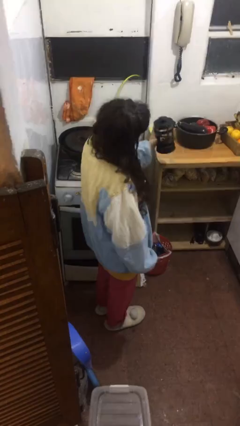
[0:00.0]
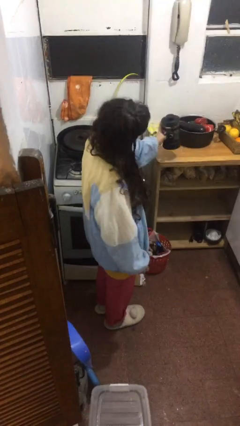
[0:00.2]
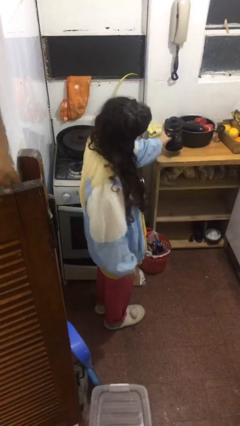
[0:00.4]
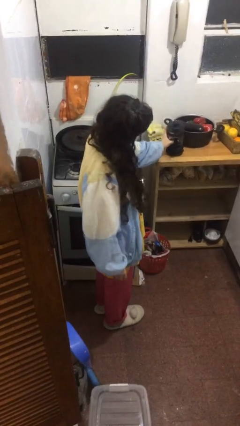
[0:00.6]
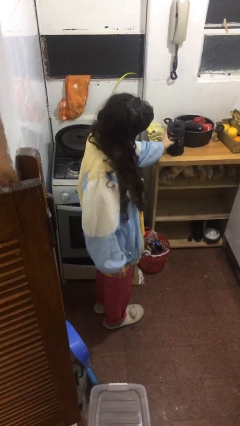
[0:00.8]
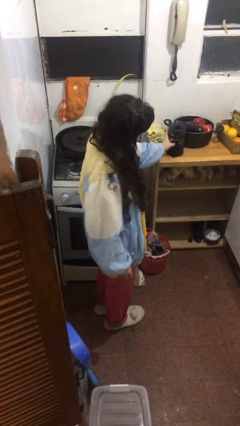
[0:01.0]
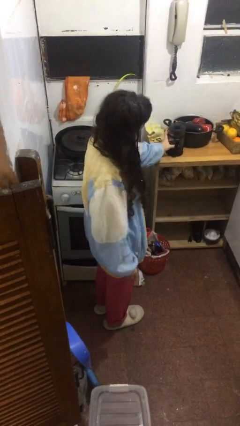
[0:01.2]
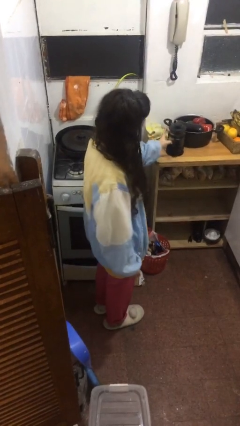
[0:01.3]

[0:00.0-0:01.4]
person puts down object on countertop

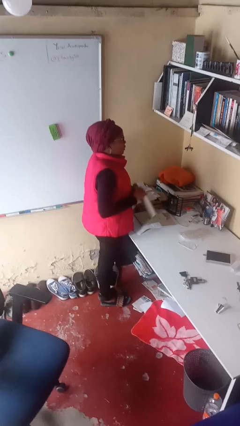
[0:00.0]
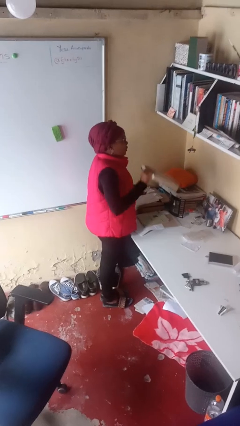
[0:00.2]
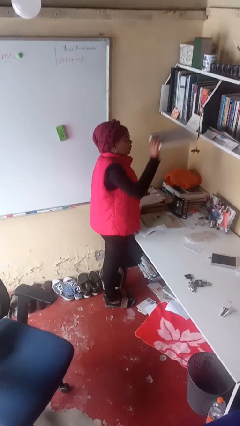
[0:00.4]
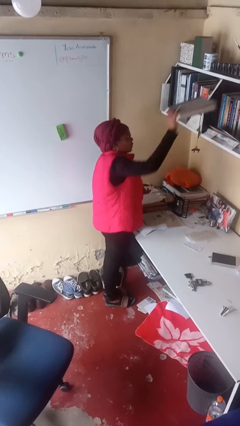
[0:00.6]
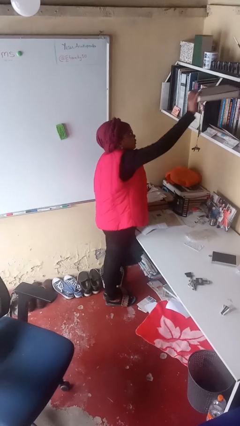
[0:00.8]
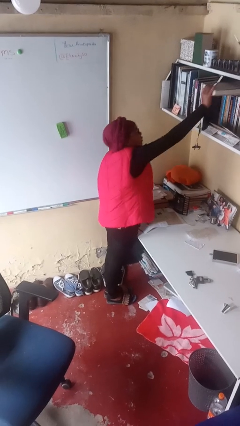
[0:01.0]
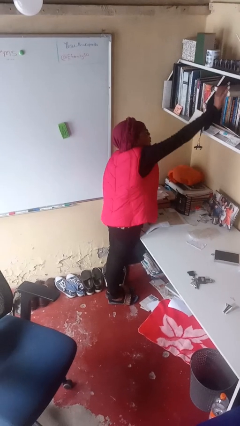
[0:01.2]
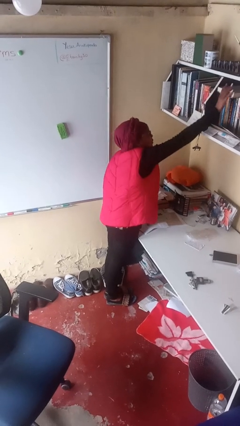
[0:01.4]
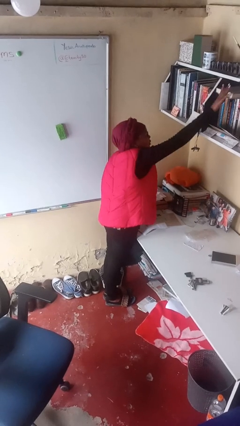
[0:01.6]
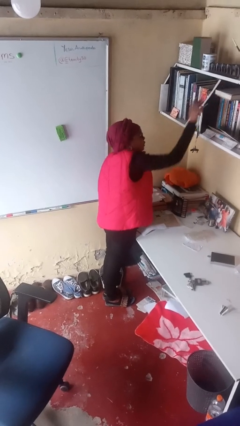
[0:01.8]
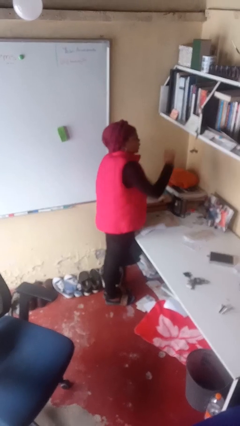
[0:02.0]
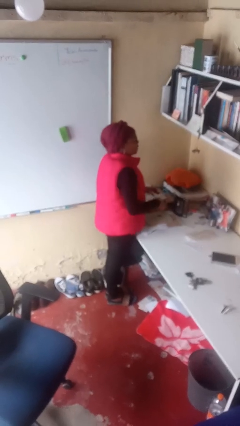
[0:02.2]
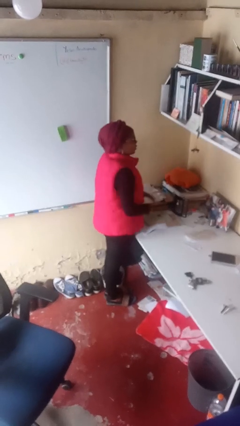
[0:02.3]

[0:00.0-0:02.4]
person puts down object on shelf

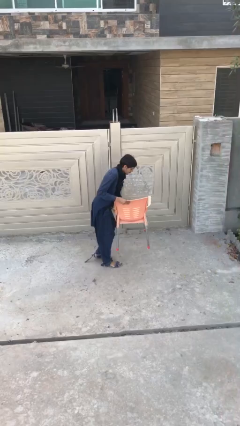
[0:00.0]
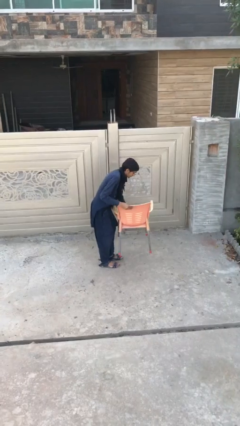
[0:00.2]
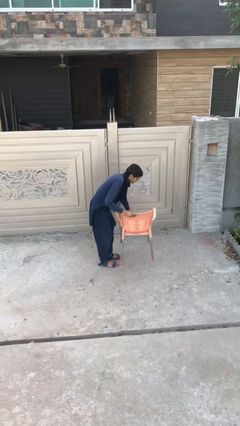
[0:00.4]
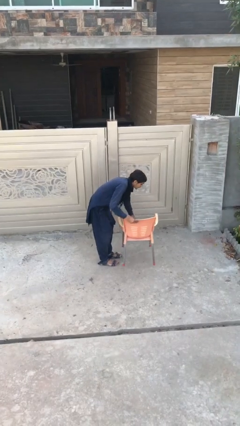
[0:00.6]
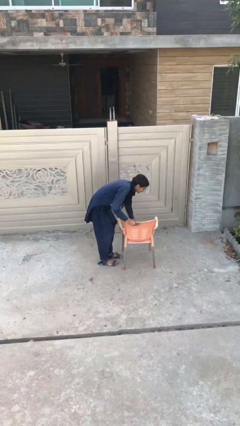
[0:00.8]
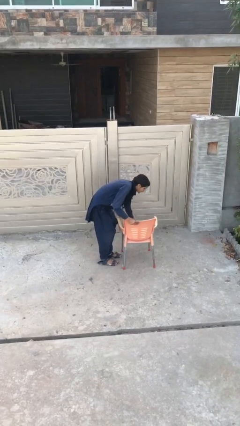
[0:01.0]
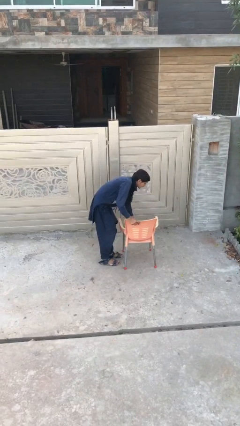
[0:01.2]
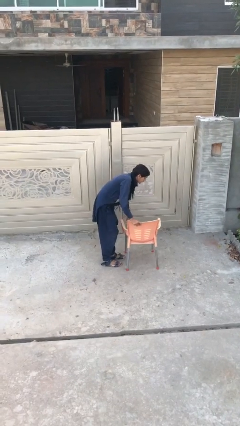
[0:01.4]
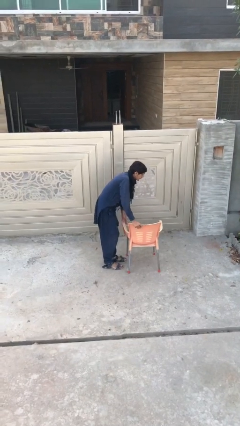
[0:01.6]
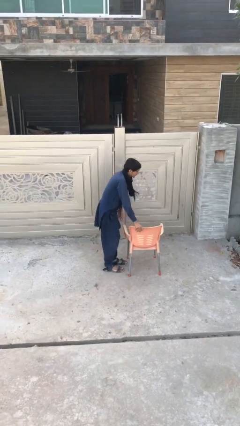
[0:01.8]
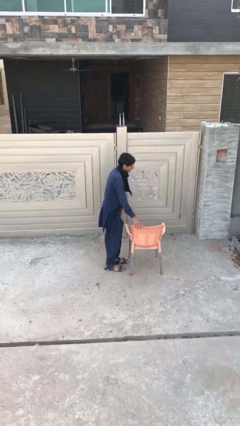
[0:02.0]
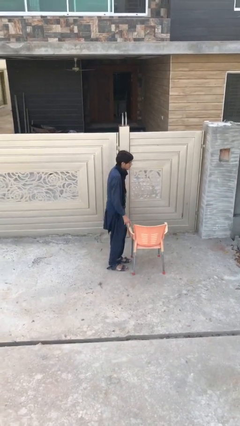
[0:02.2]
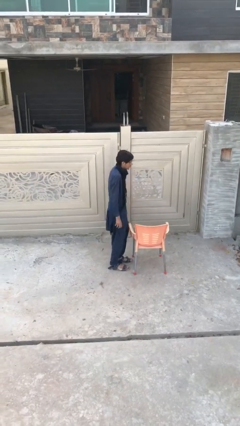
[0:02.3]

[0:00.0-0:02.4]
person puts down object on floor

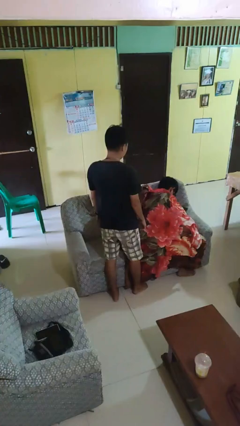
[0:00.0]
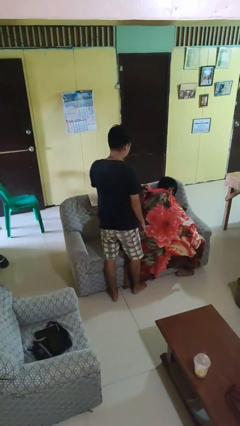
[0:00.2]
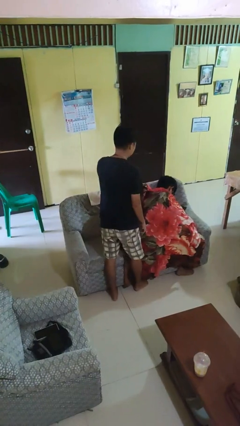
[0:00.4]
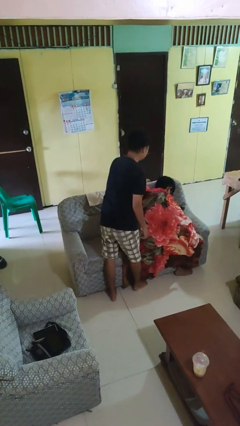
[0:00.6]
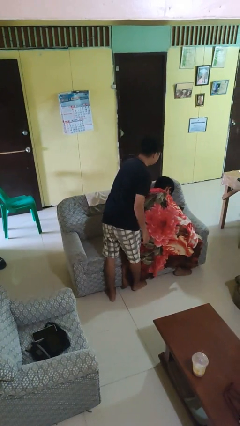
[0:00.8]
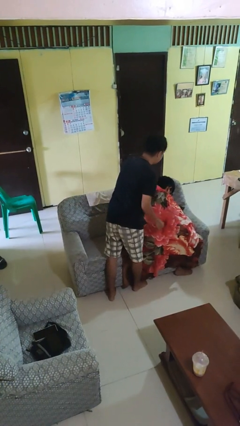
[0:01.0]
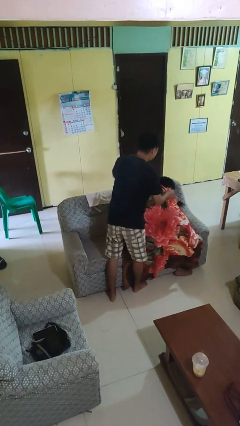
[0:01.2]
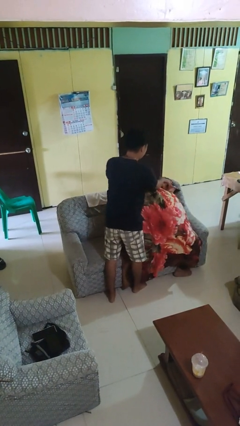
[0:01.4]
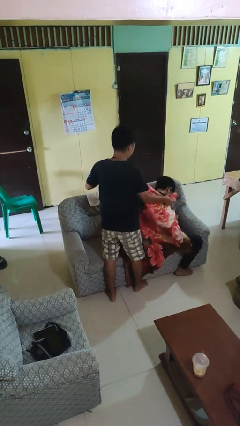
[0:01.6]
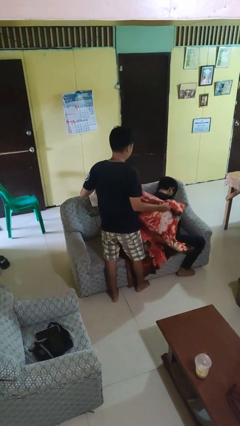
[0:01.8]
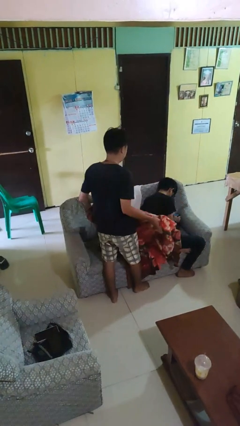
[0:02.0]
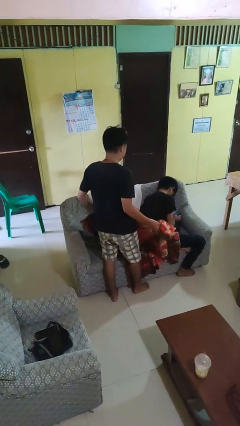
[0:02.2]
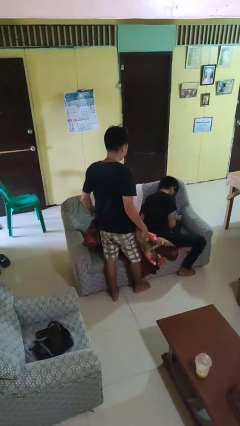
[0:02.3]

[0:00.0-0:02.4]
person uncovers friend with blanket

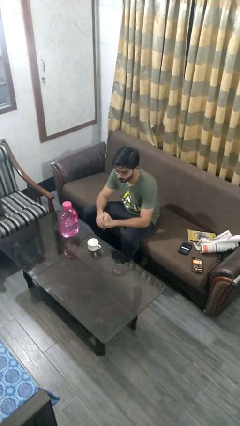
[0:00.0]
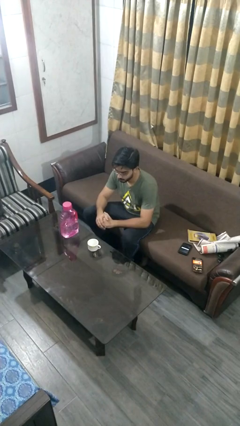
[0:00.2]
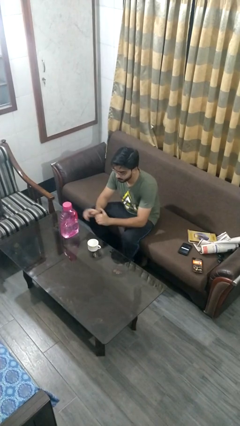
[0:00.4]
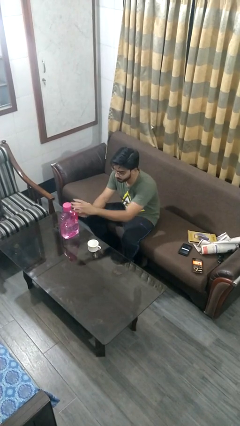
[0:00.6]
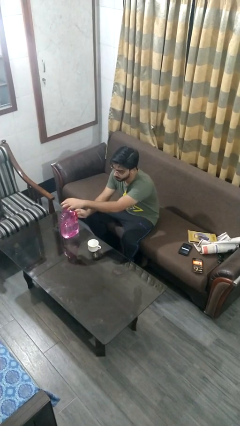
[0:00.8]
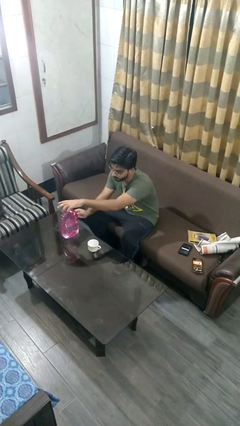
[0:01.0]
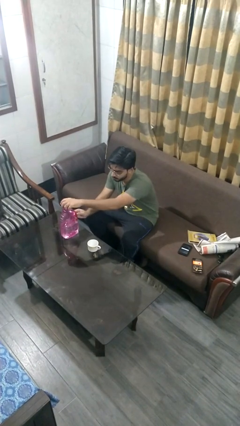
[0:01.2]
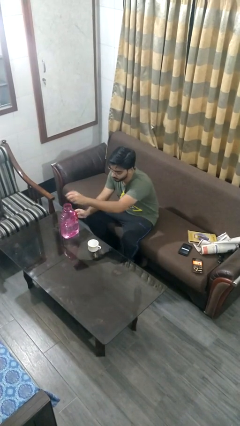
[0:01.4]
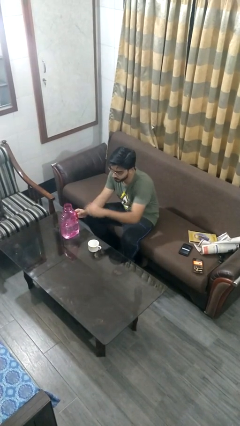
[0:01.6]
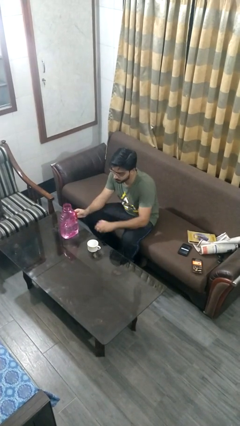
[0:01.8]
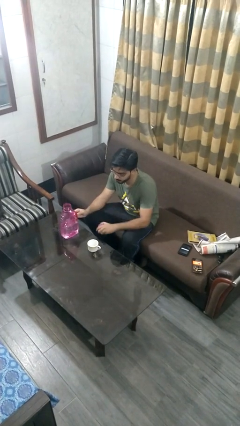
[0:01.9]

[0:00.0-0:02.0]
person unscrews lid from bottle

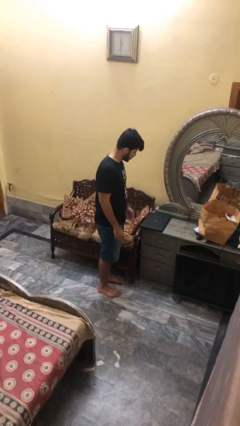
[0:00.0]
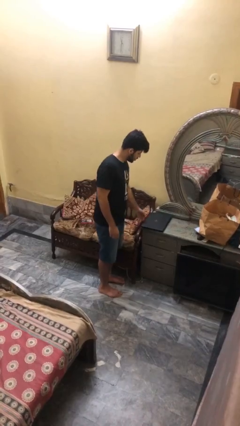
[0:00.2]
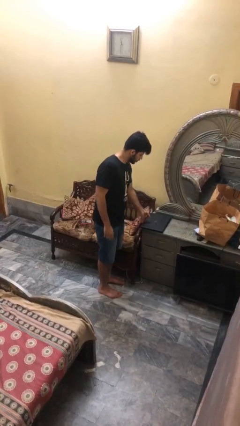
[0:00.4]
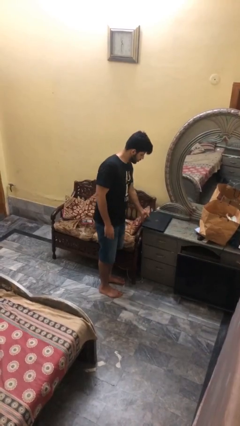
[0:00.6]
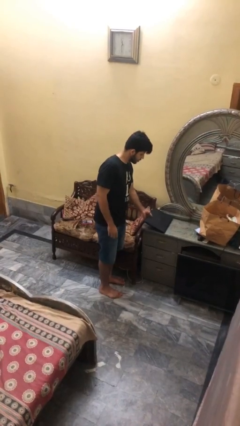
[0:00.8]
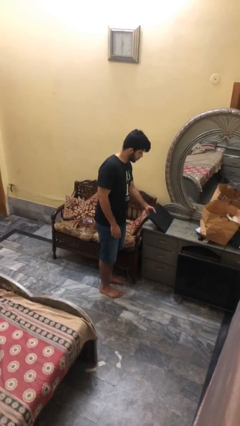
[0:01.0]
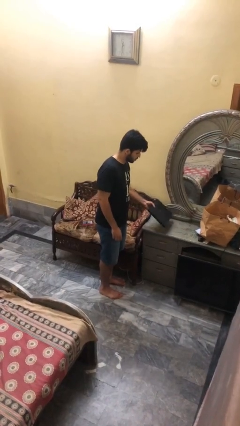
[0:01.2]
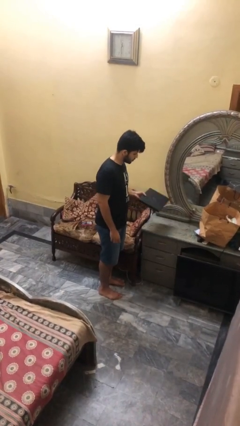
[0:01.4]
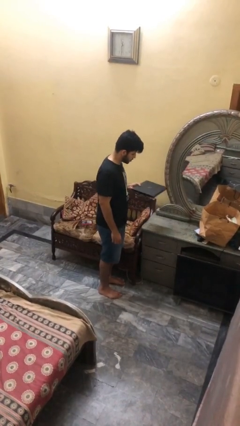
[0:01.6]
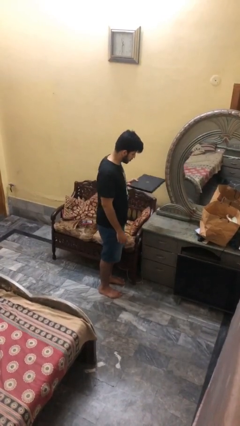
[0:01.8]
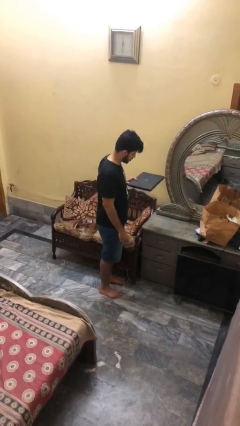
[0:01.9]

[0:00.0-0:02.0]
person picks up object from countertop

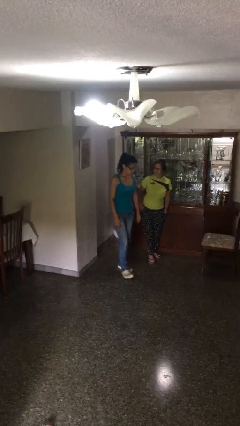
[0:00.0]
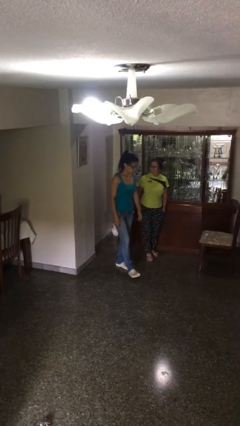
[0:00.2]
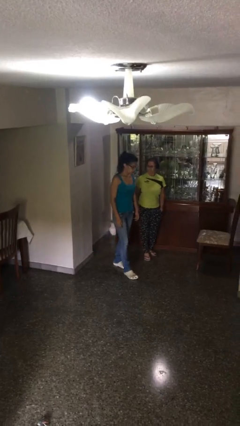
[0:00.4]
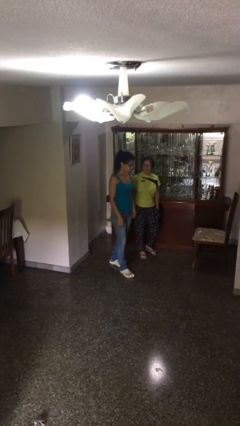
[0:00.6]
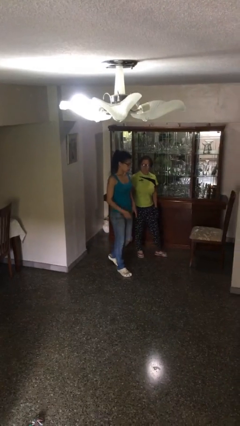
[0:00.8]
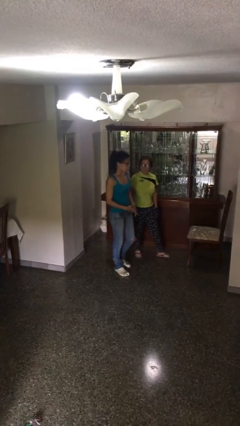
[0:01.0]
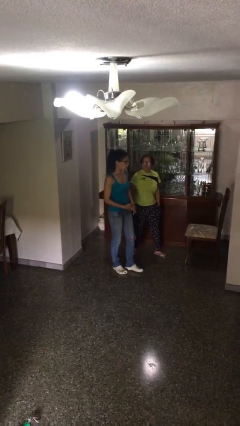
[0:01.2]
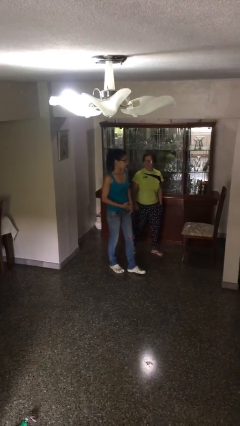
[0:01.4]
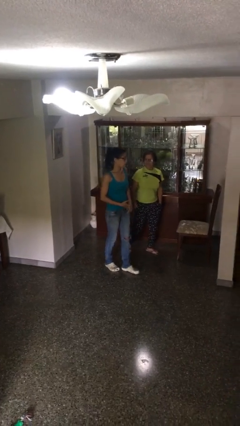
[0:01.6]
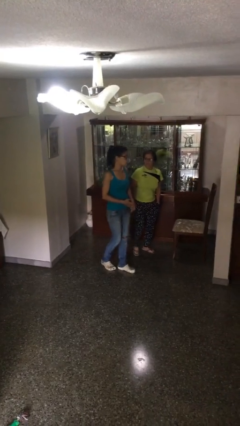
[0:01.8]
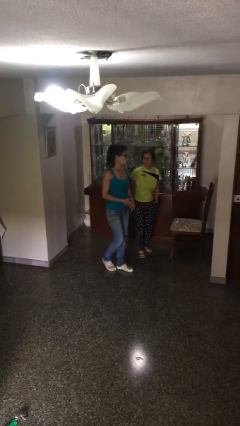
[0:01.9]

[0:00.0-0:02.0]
person talks to person

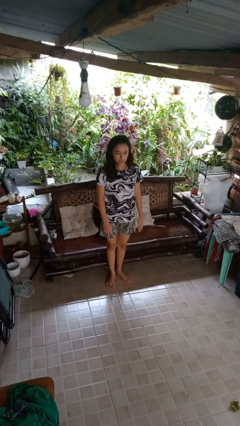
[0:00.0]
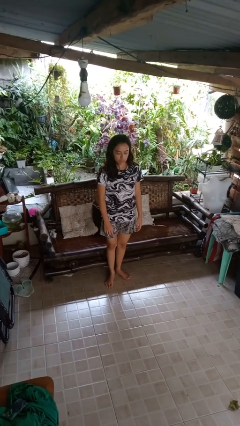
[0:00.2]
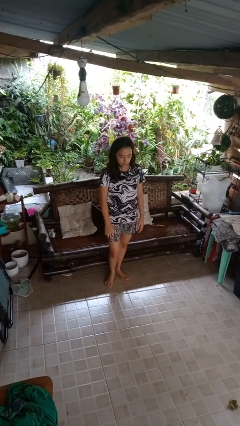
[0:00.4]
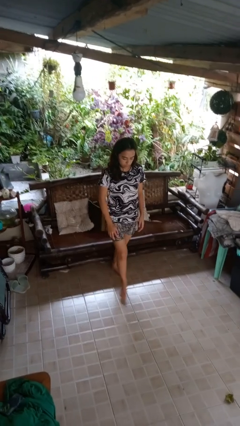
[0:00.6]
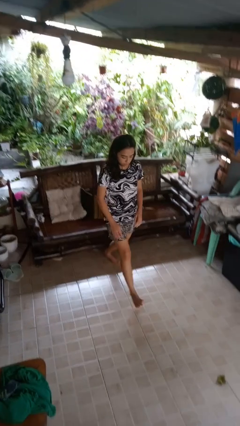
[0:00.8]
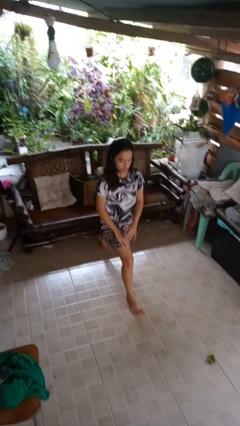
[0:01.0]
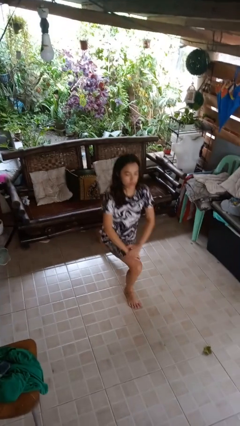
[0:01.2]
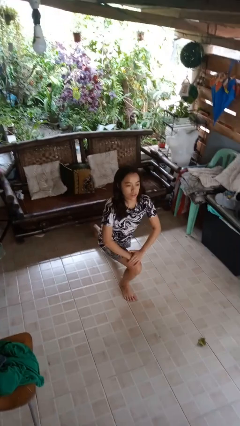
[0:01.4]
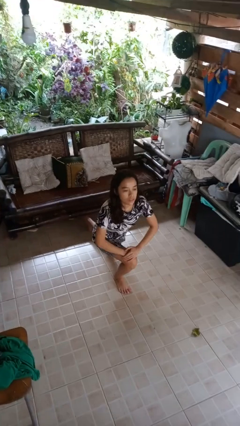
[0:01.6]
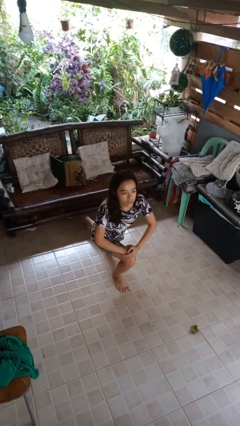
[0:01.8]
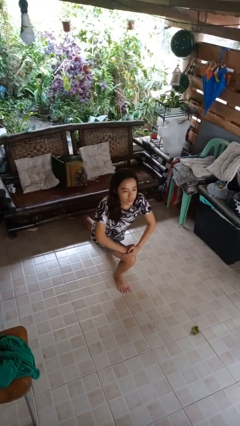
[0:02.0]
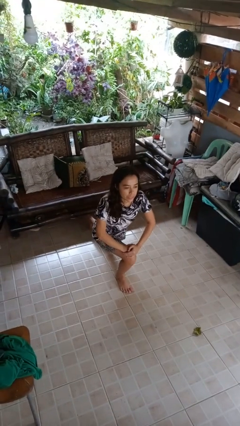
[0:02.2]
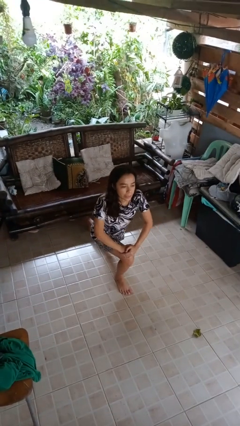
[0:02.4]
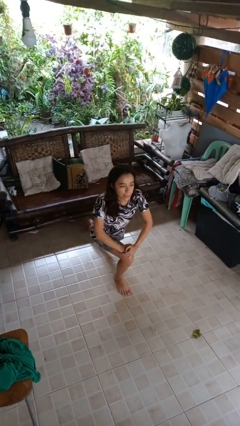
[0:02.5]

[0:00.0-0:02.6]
person exercises with lunges
